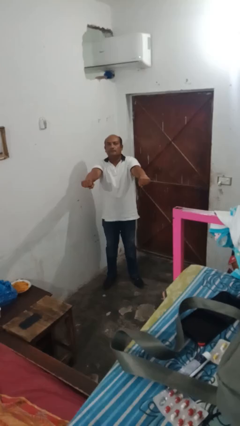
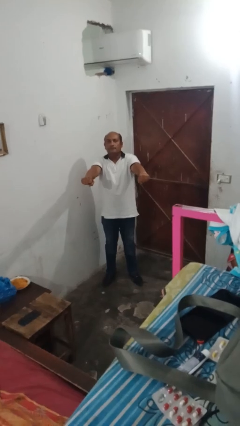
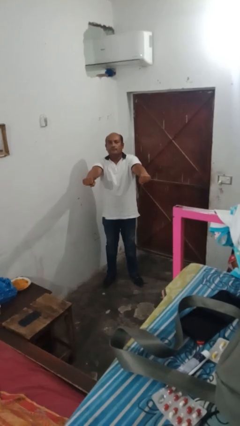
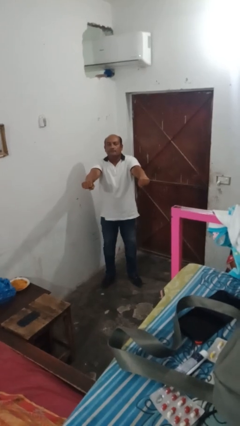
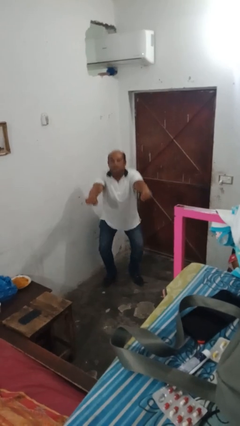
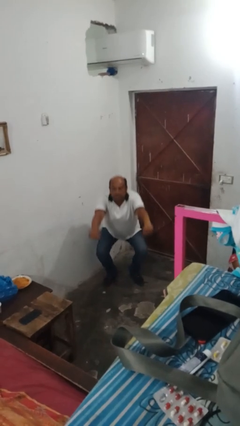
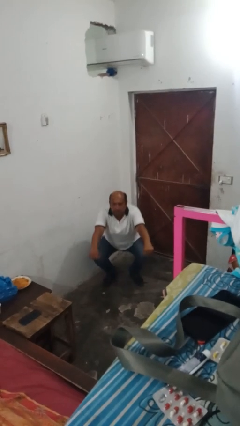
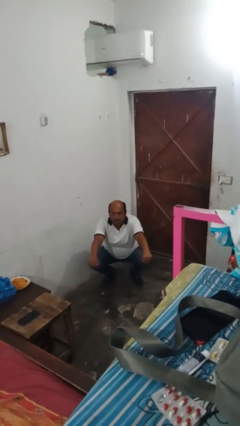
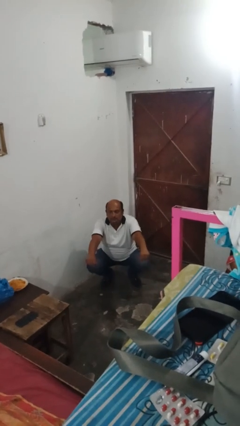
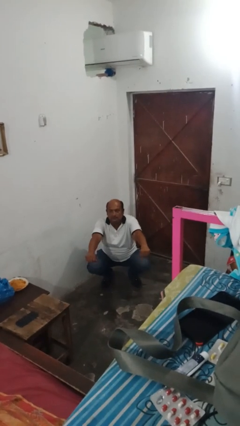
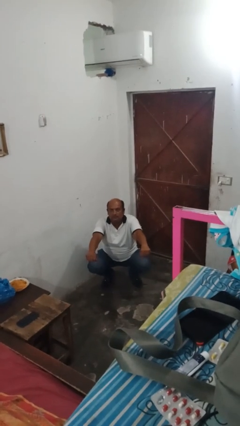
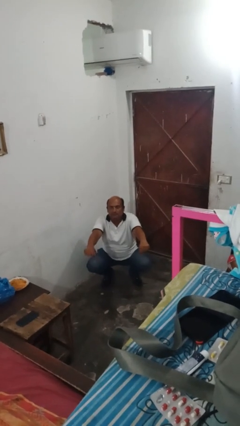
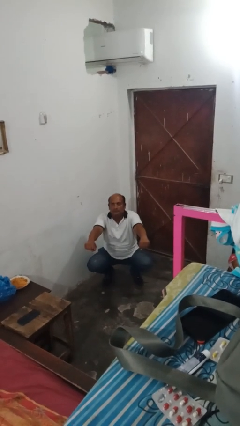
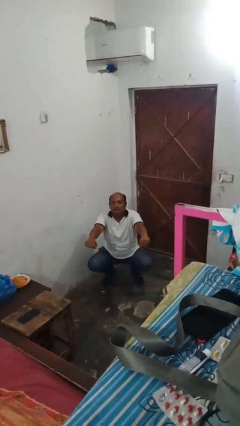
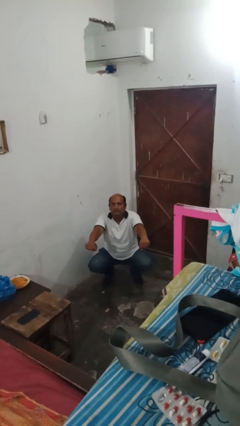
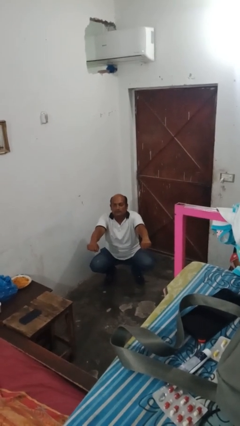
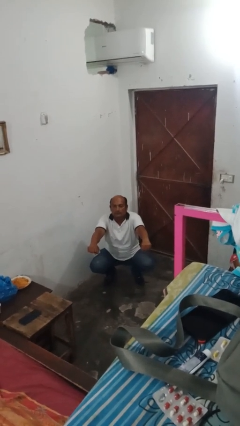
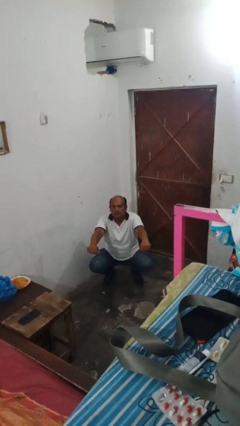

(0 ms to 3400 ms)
person squats

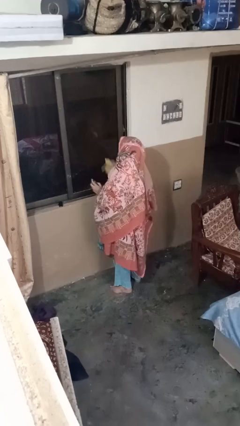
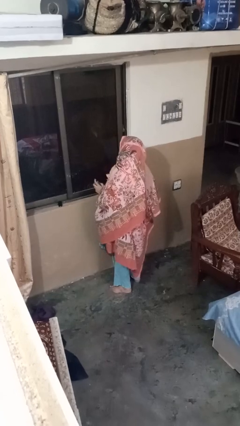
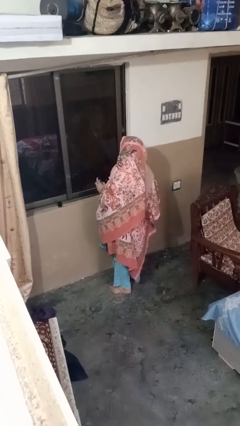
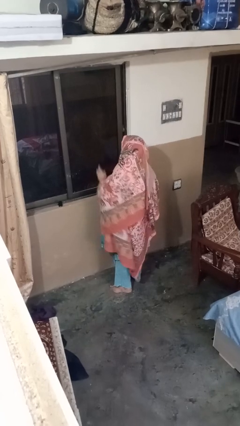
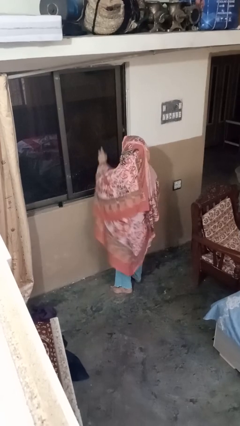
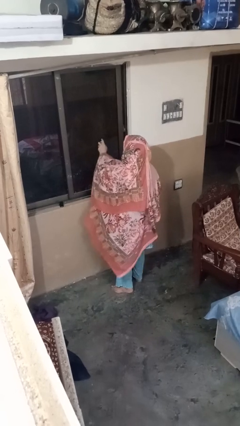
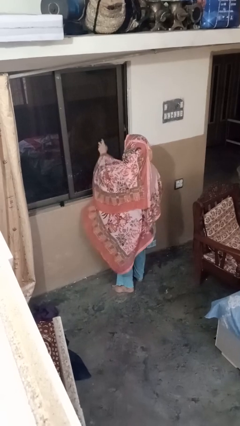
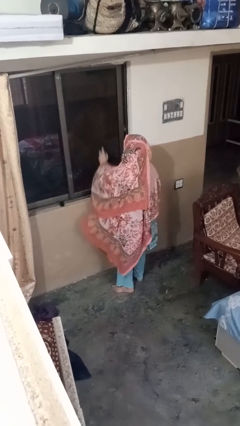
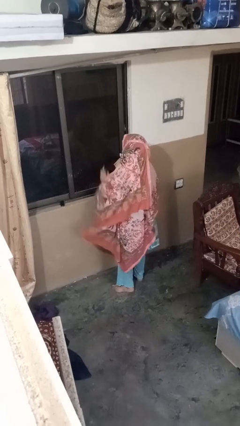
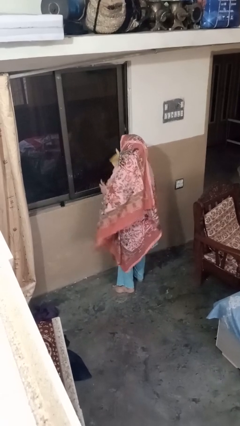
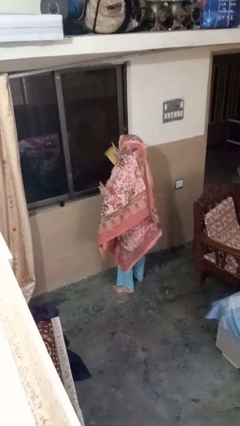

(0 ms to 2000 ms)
person sprays from bottle

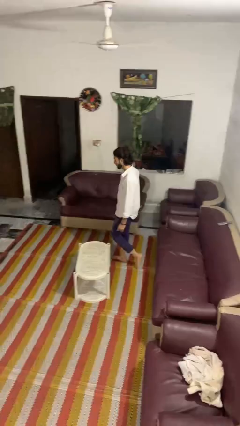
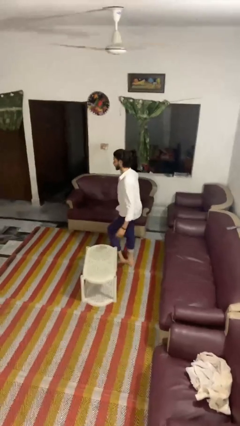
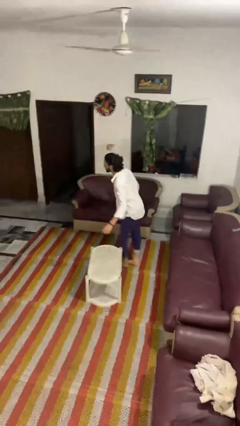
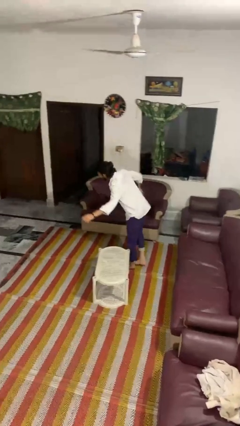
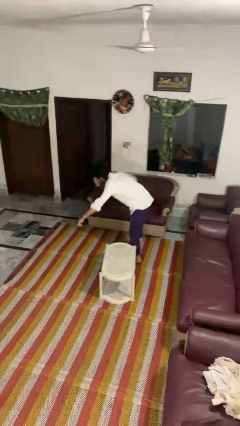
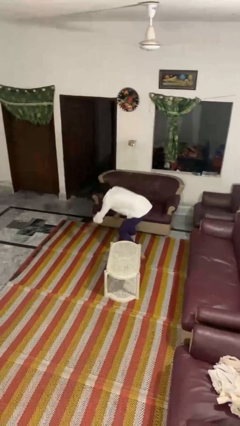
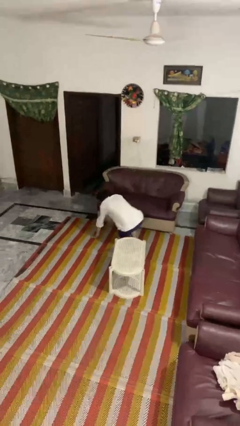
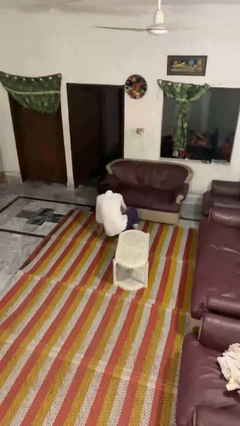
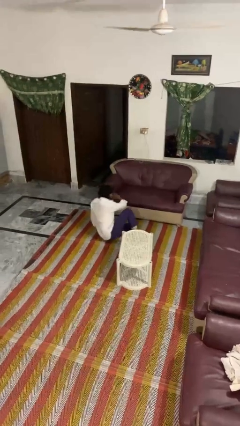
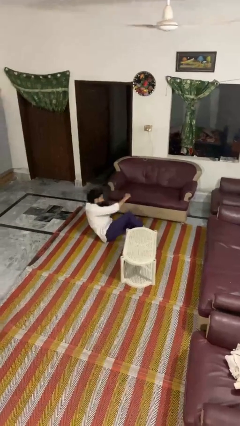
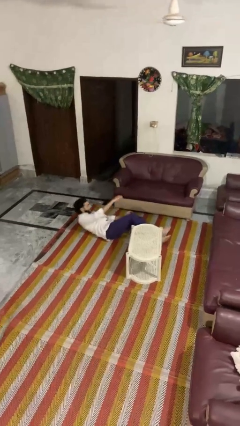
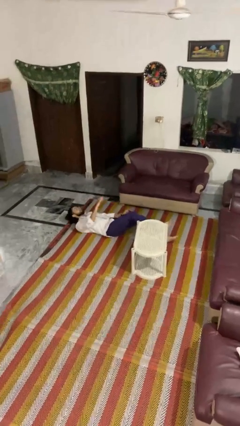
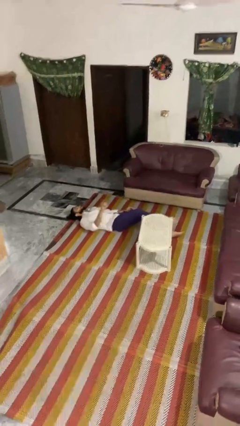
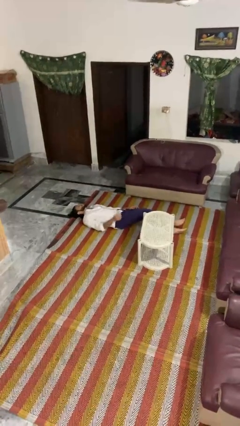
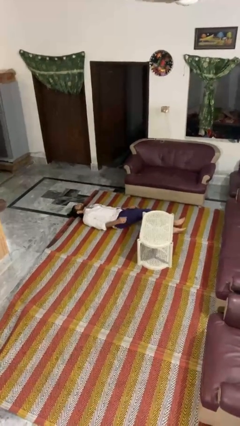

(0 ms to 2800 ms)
person trips on object on floor

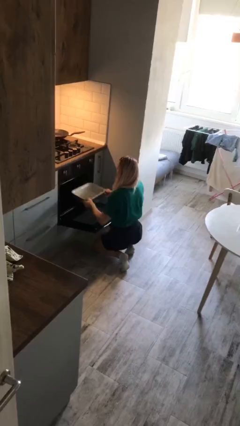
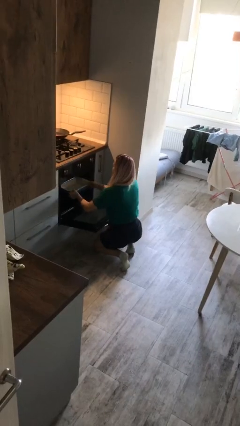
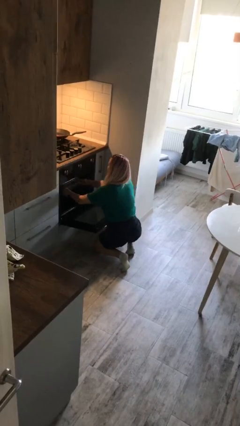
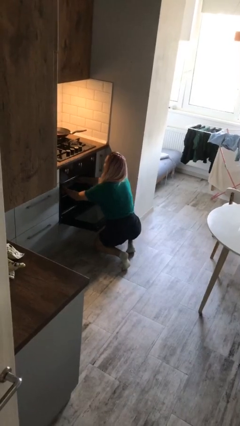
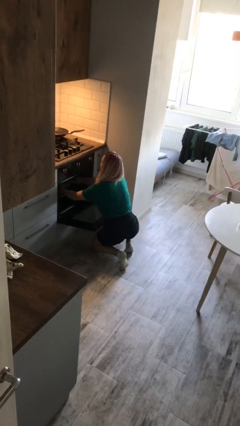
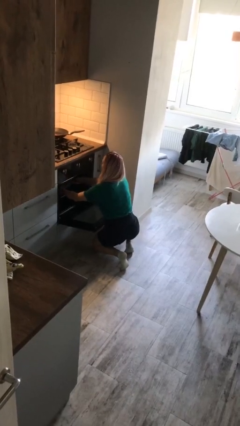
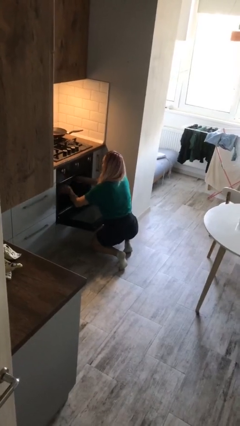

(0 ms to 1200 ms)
person puts object into oven

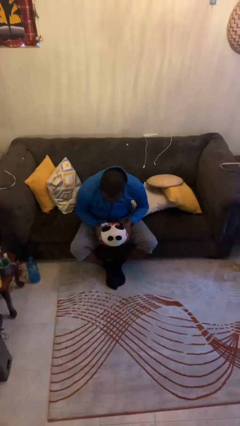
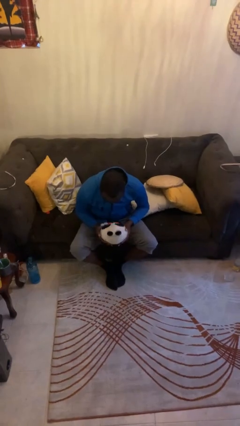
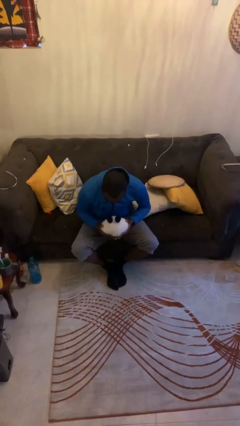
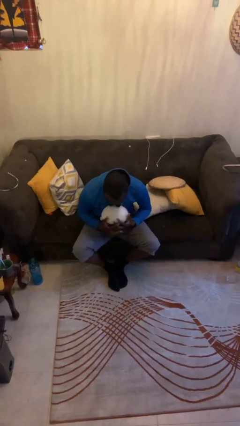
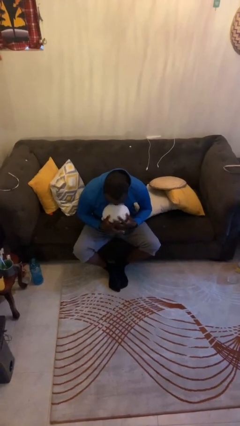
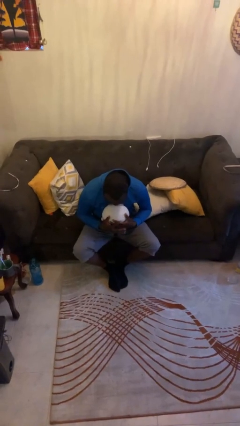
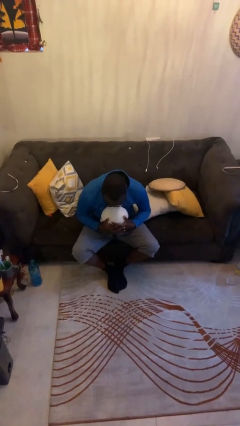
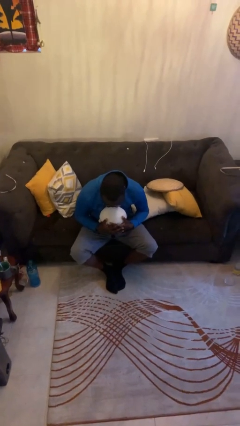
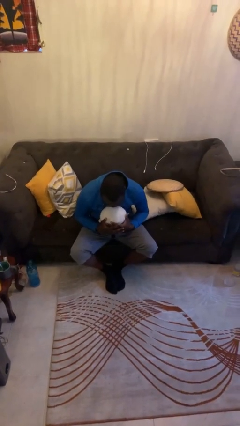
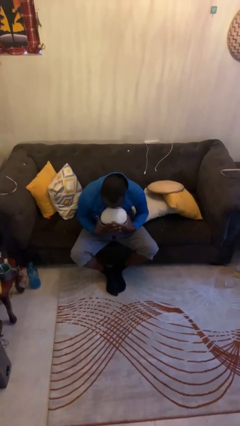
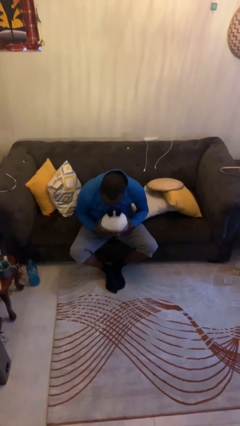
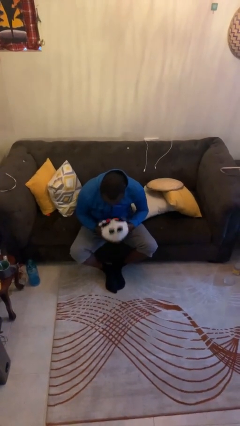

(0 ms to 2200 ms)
person hugs stuffed animal

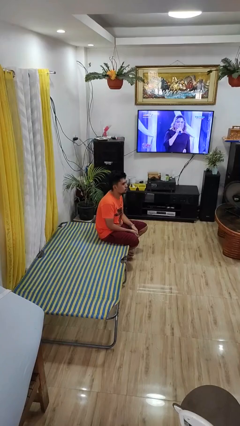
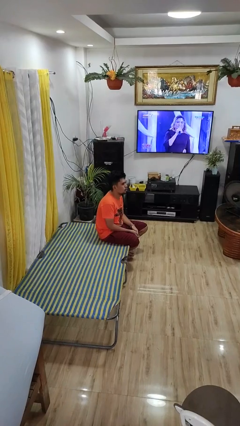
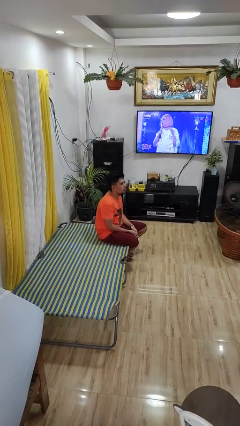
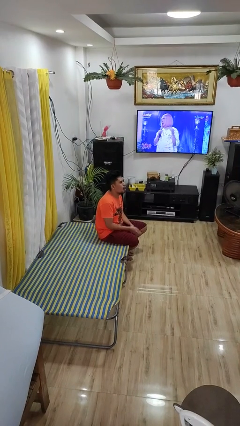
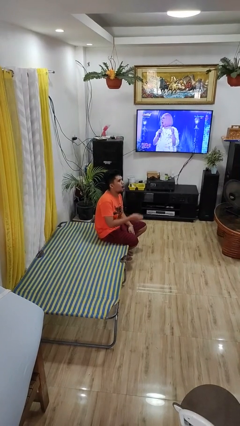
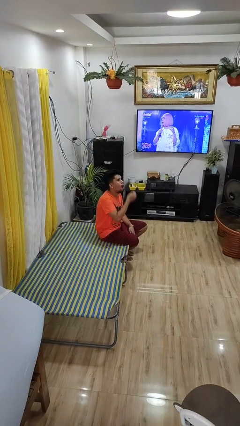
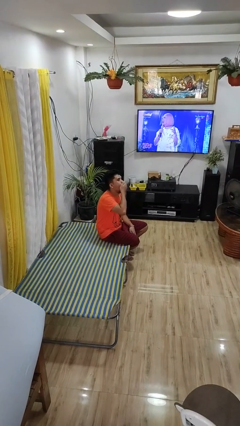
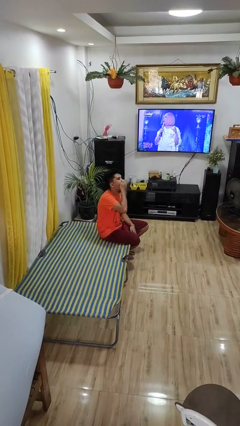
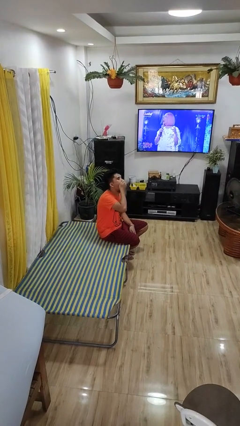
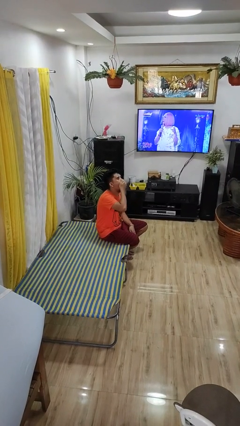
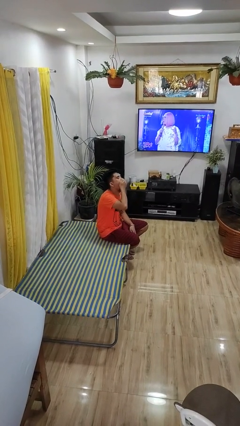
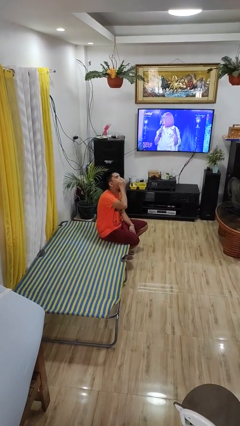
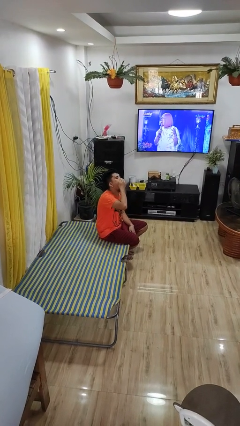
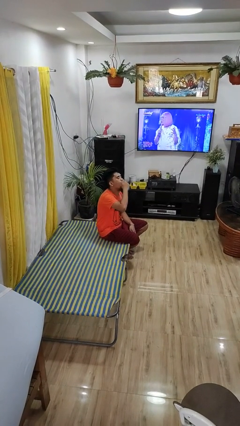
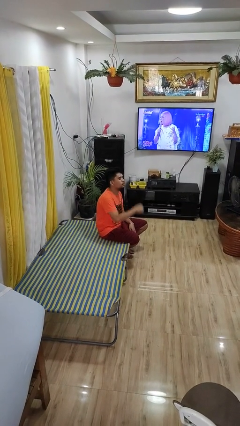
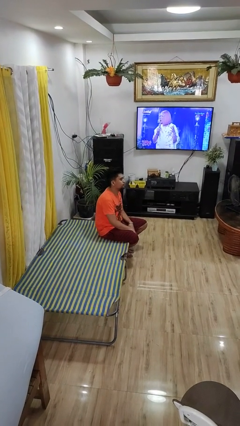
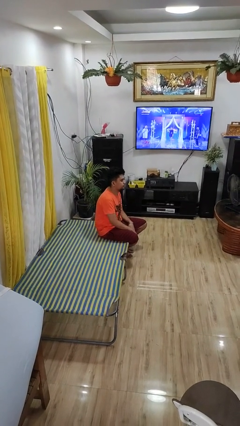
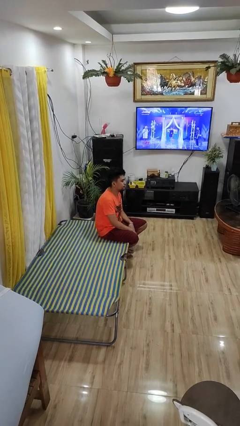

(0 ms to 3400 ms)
person yawns

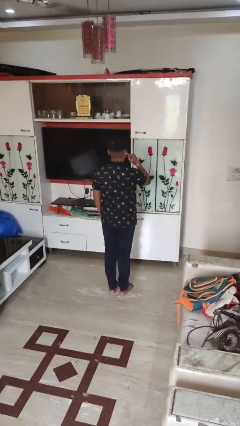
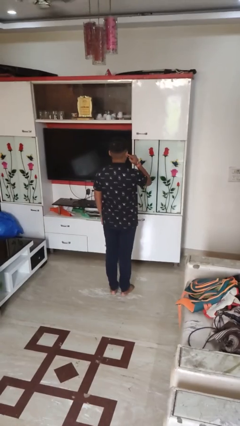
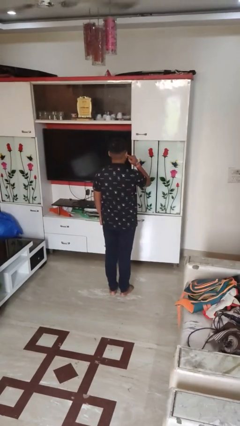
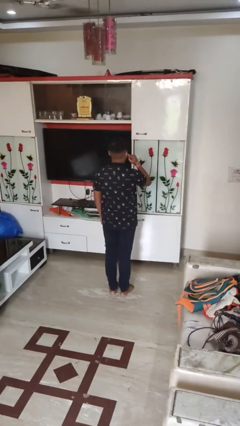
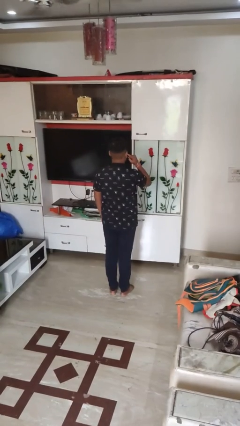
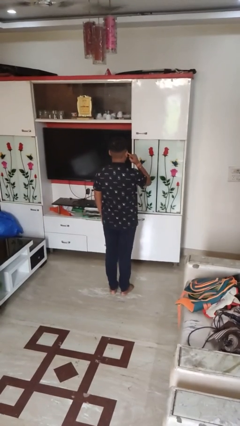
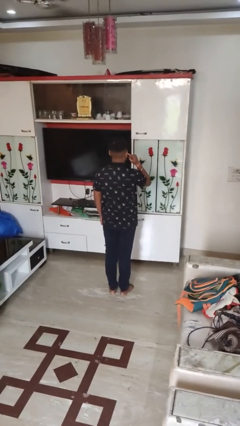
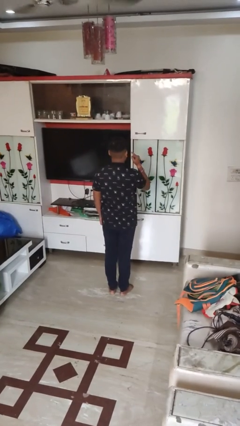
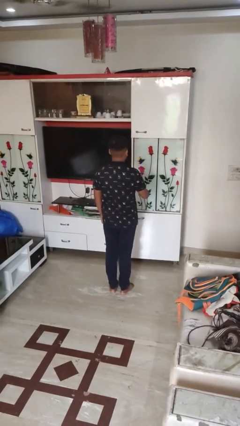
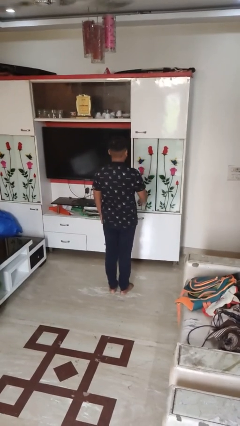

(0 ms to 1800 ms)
person gestures listen closely
